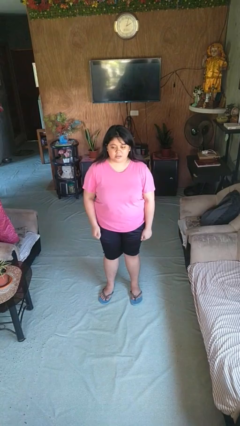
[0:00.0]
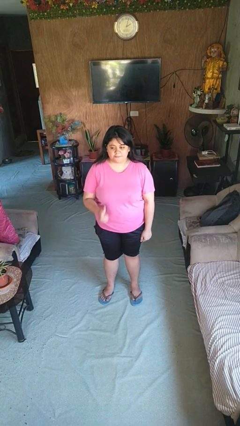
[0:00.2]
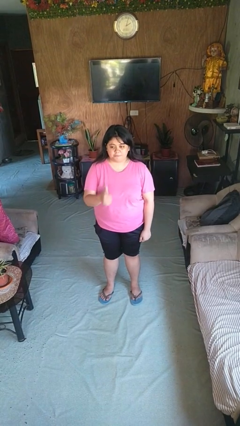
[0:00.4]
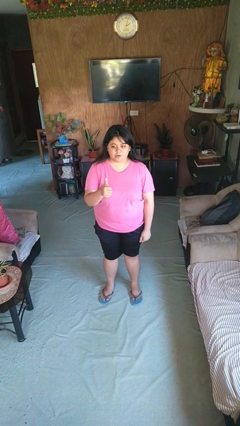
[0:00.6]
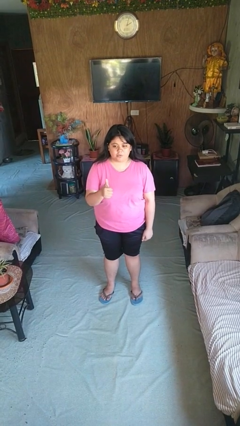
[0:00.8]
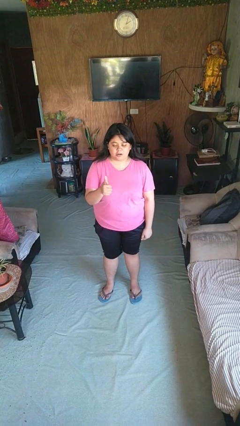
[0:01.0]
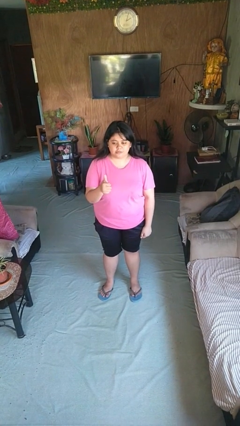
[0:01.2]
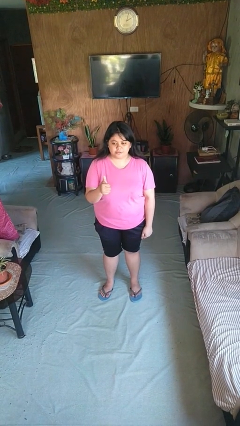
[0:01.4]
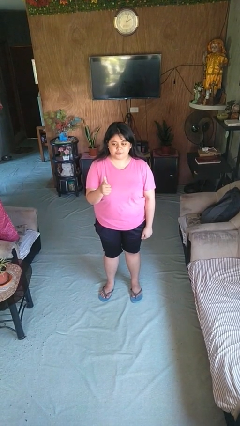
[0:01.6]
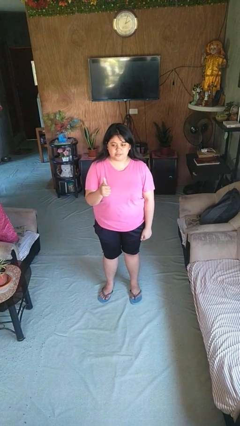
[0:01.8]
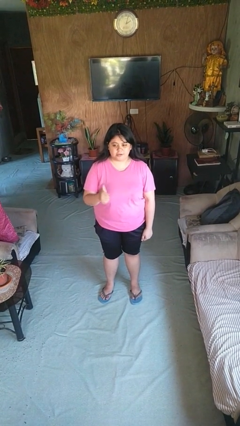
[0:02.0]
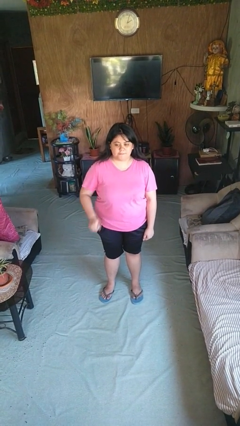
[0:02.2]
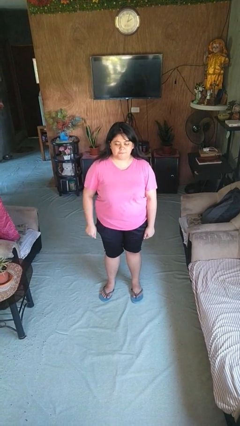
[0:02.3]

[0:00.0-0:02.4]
person gestures thumbs up

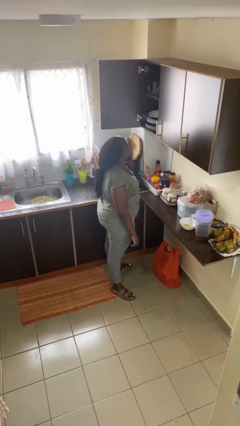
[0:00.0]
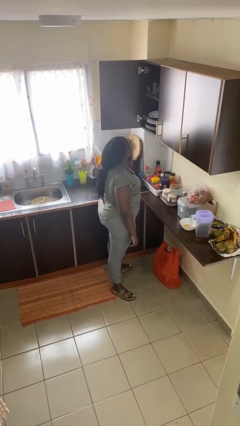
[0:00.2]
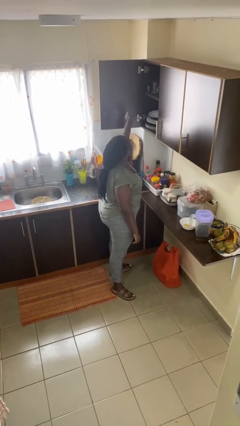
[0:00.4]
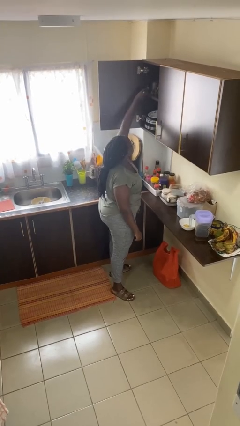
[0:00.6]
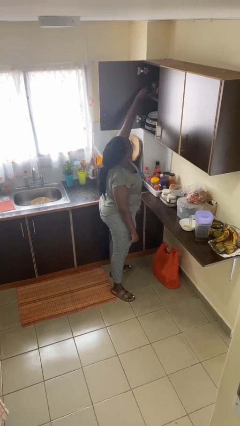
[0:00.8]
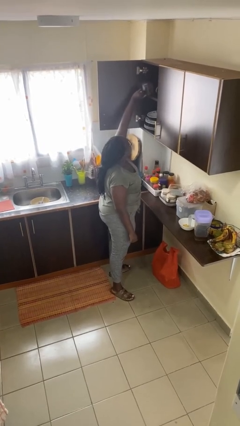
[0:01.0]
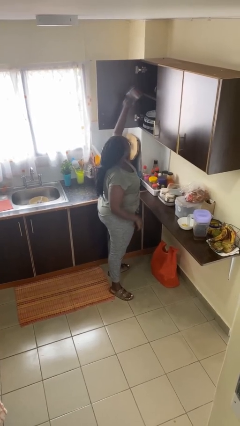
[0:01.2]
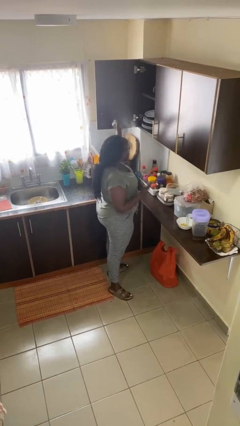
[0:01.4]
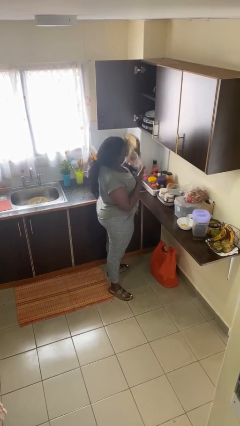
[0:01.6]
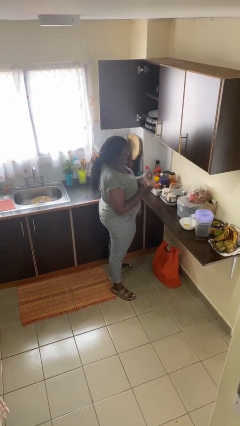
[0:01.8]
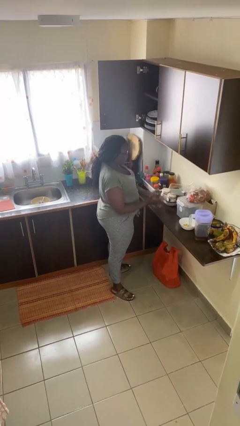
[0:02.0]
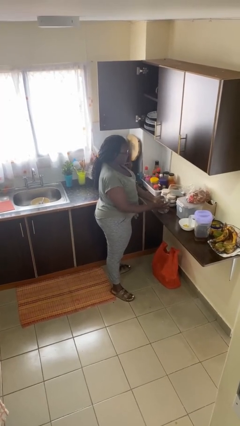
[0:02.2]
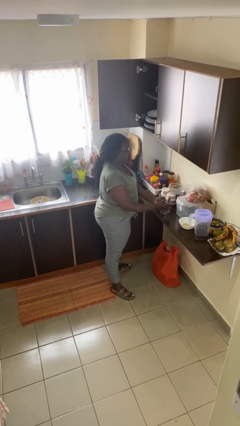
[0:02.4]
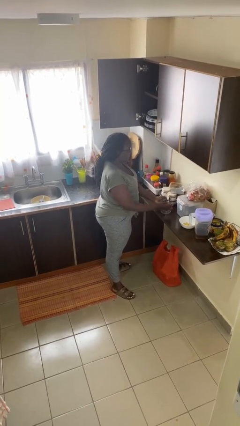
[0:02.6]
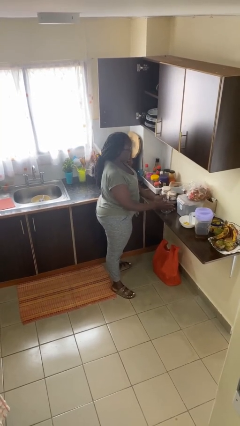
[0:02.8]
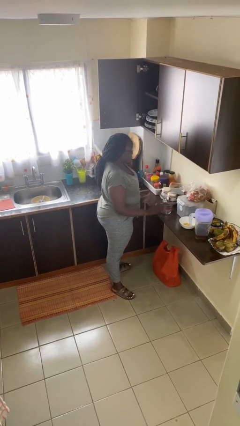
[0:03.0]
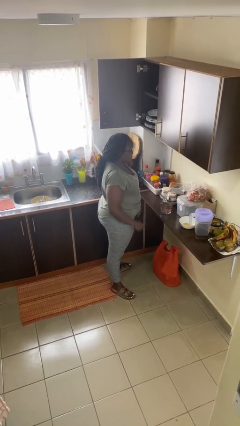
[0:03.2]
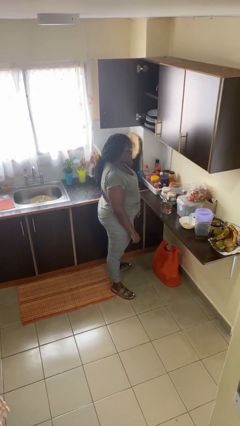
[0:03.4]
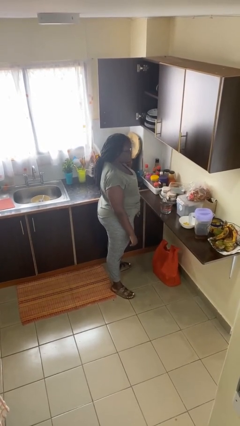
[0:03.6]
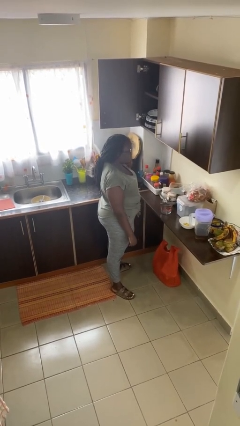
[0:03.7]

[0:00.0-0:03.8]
person takes object from cabinet

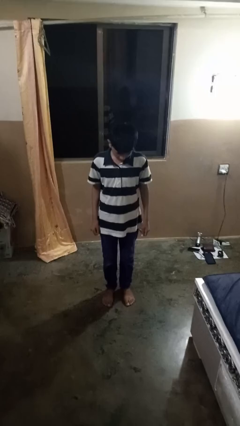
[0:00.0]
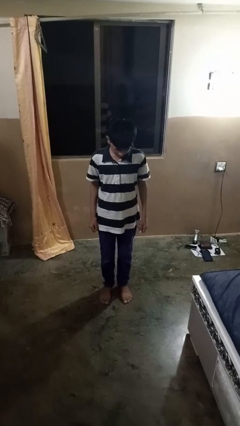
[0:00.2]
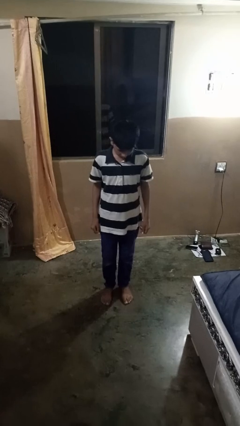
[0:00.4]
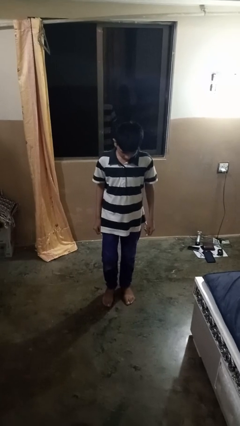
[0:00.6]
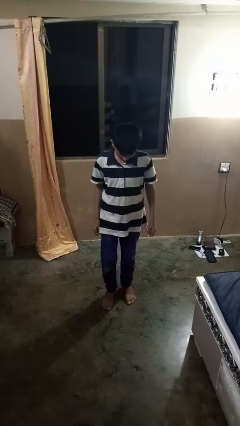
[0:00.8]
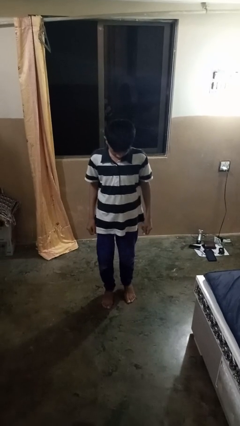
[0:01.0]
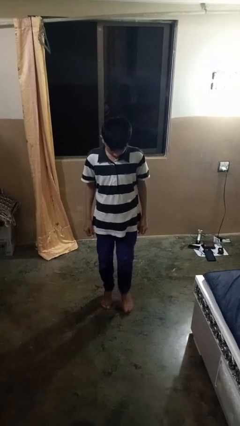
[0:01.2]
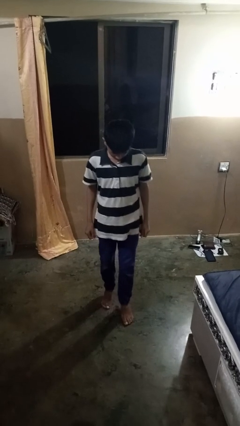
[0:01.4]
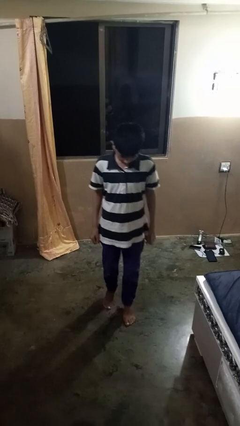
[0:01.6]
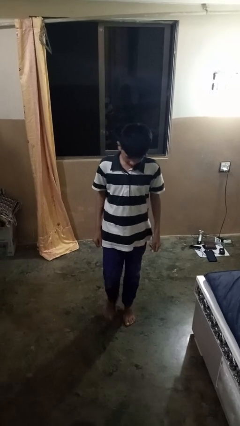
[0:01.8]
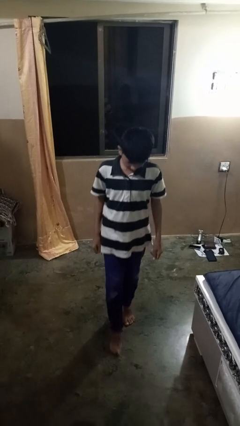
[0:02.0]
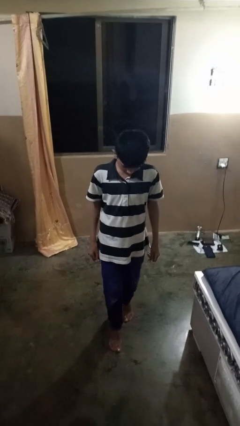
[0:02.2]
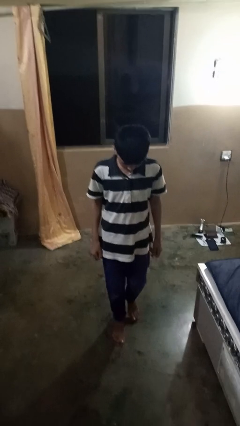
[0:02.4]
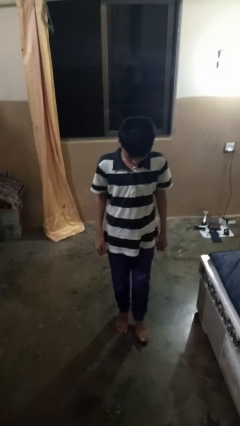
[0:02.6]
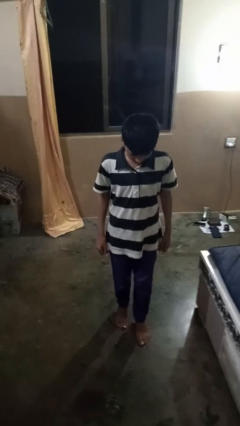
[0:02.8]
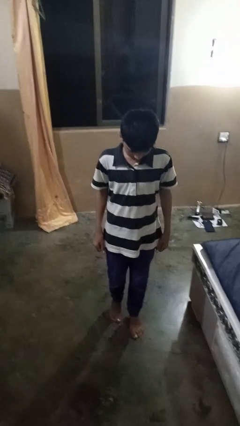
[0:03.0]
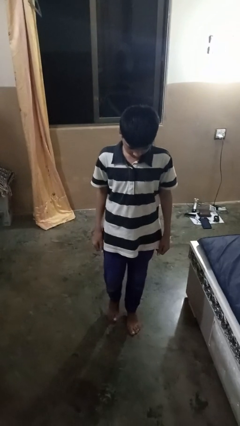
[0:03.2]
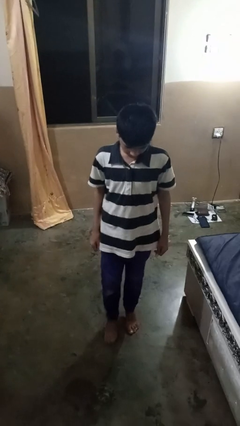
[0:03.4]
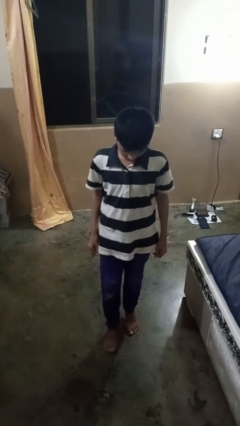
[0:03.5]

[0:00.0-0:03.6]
person walks tiptoe

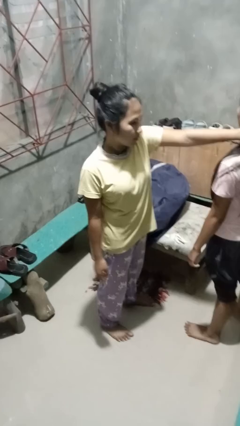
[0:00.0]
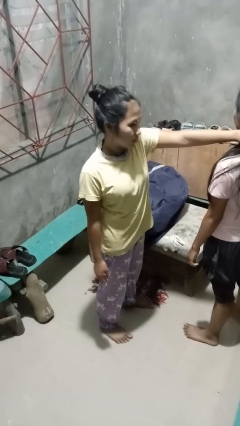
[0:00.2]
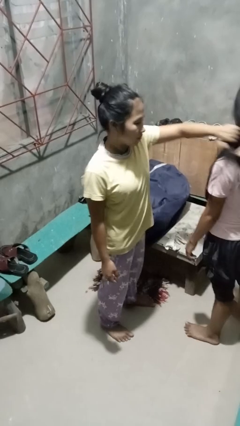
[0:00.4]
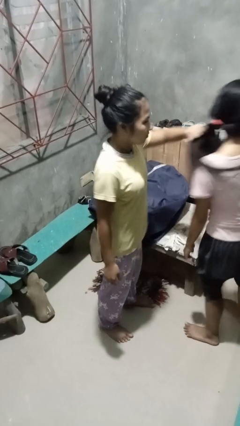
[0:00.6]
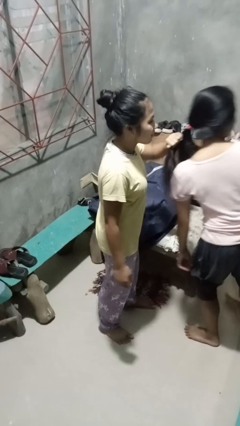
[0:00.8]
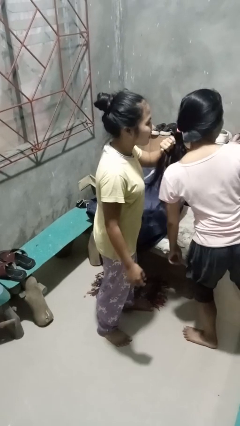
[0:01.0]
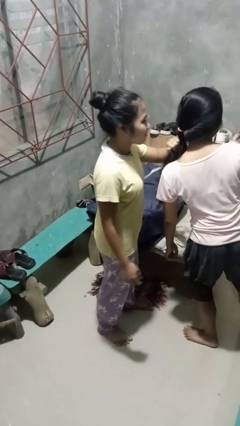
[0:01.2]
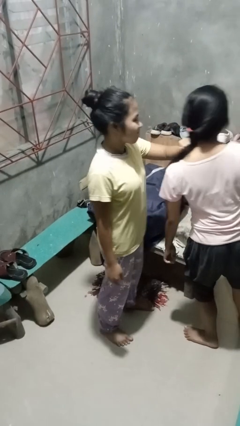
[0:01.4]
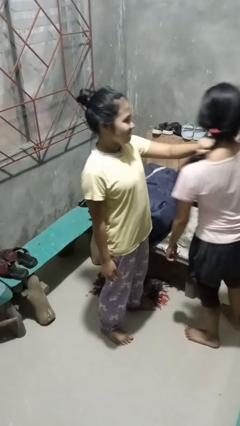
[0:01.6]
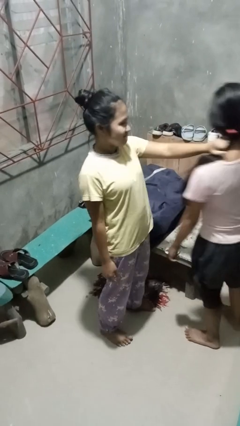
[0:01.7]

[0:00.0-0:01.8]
person grabs person by hair

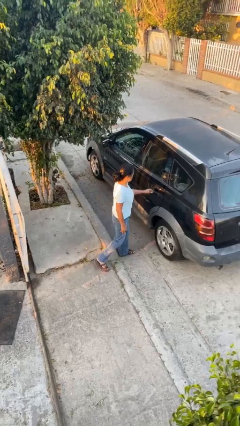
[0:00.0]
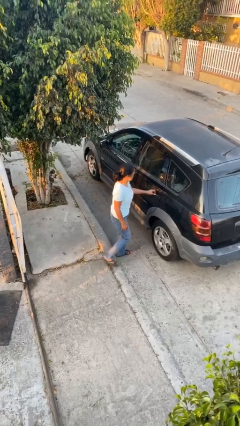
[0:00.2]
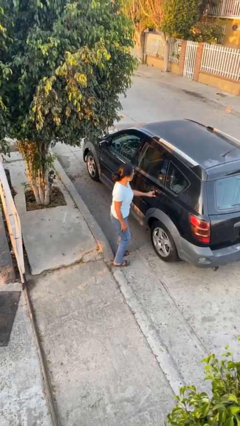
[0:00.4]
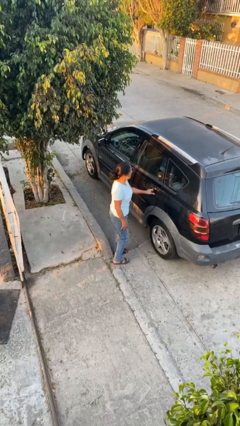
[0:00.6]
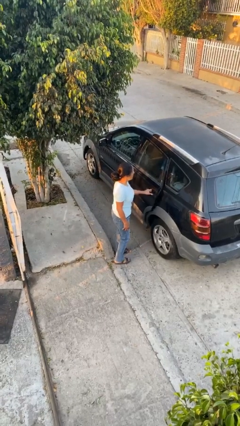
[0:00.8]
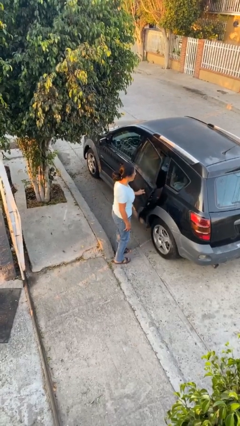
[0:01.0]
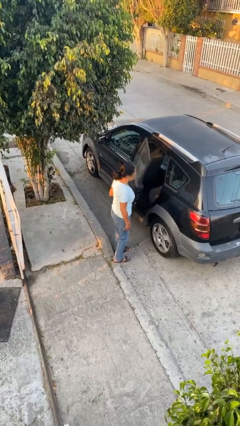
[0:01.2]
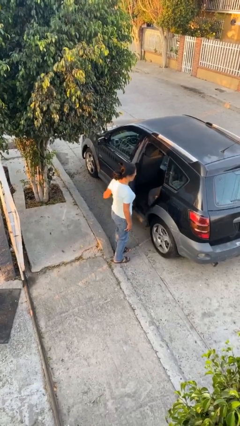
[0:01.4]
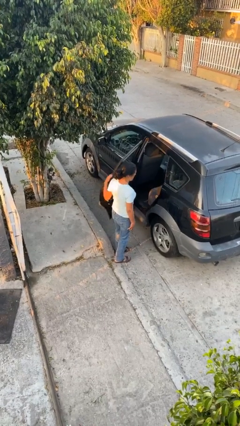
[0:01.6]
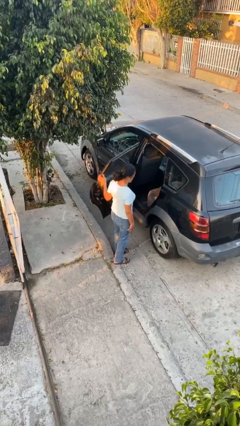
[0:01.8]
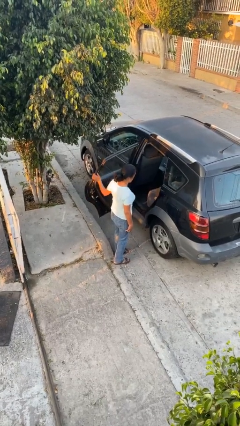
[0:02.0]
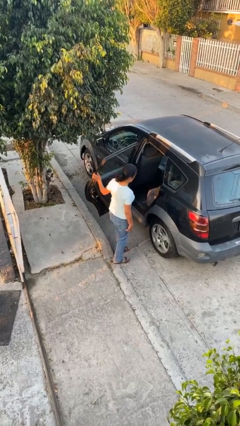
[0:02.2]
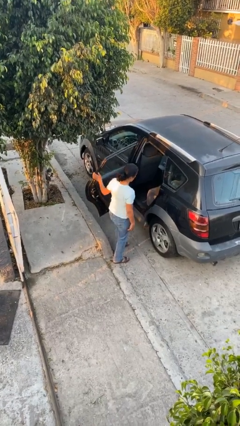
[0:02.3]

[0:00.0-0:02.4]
person opens car door

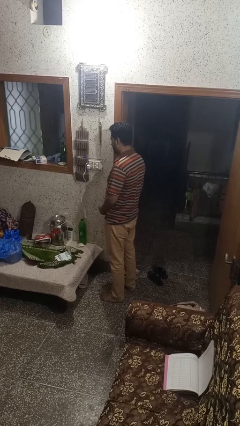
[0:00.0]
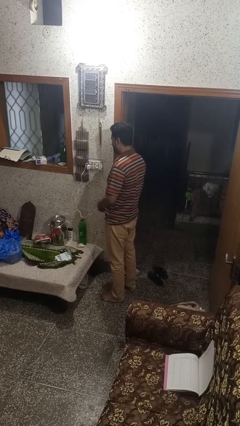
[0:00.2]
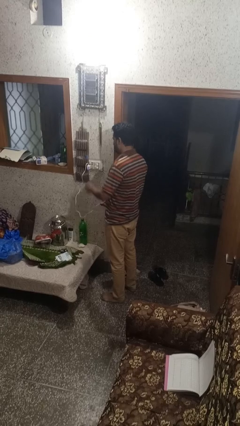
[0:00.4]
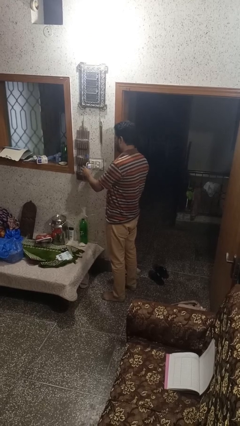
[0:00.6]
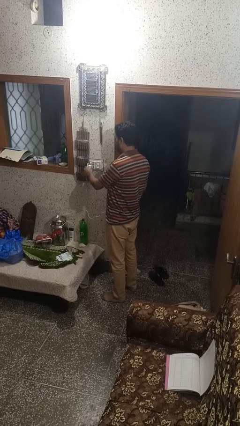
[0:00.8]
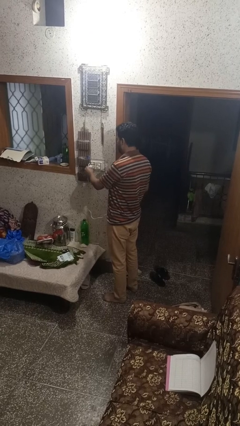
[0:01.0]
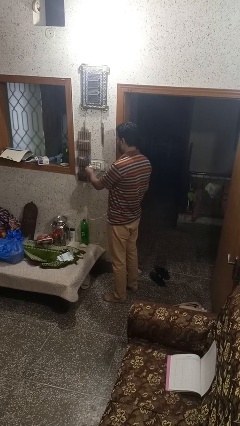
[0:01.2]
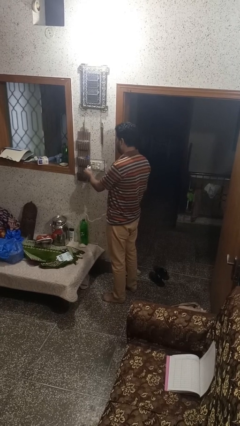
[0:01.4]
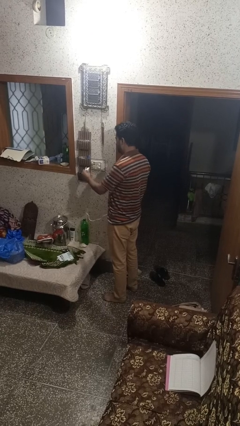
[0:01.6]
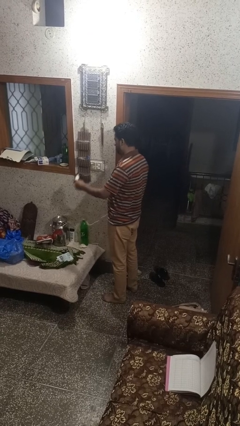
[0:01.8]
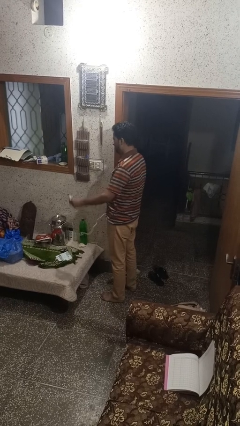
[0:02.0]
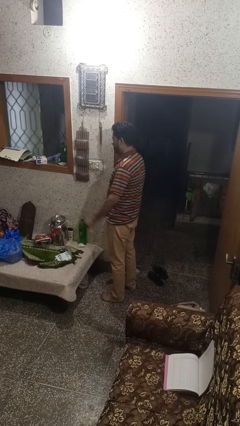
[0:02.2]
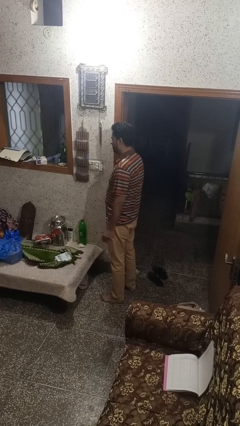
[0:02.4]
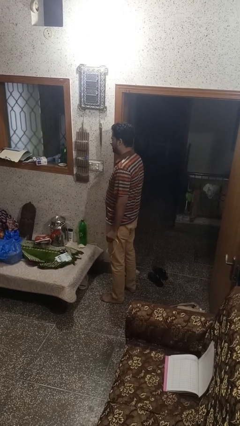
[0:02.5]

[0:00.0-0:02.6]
person unplugs from electrical socket

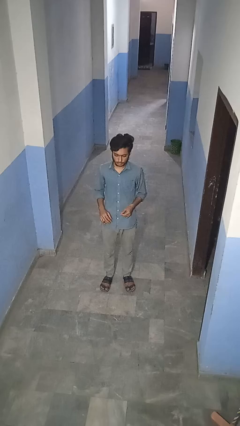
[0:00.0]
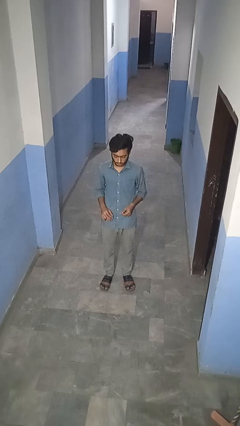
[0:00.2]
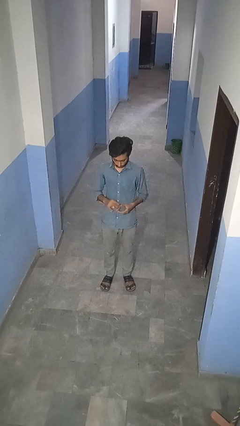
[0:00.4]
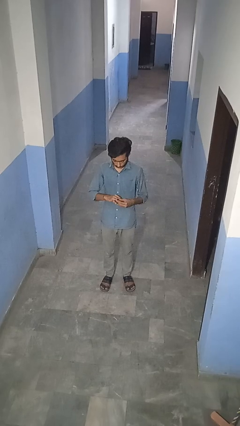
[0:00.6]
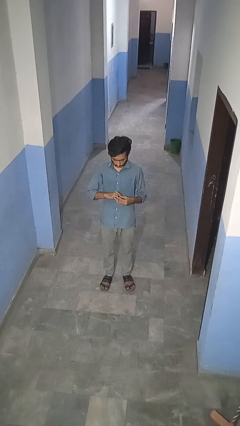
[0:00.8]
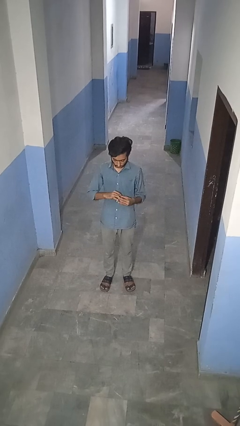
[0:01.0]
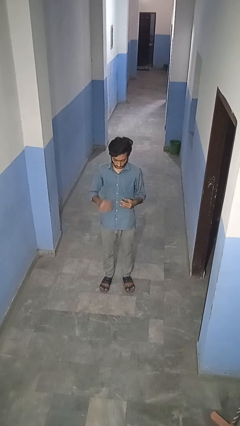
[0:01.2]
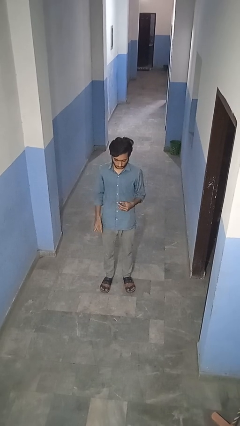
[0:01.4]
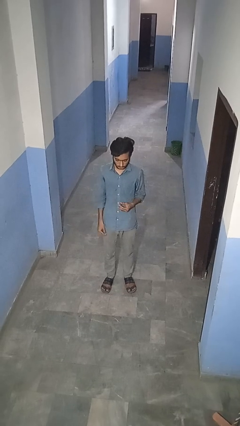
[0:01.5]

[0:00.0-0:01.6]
person takes off ring
